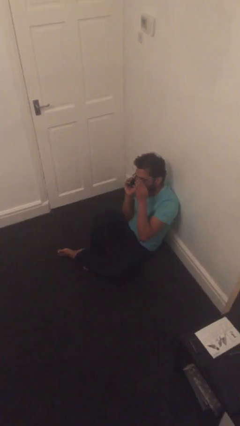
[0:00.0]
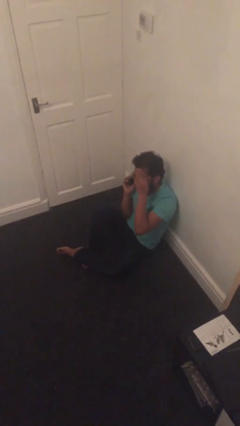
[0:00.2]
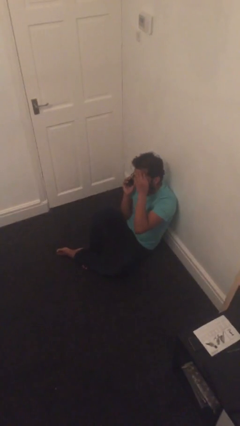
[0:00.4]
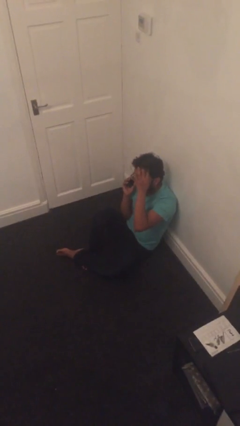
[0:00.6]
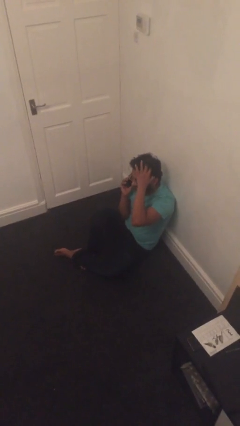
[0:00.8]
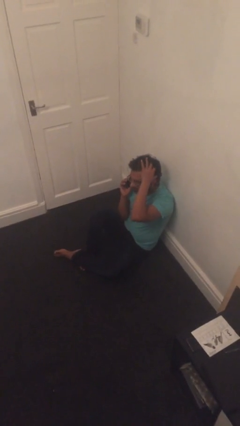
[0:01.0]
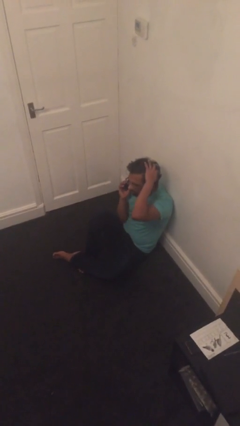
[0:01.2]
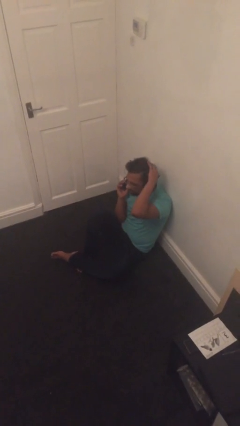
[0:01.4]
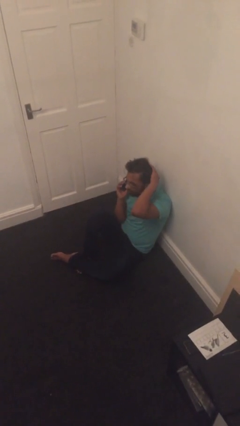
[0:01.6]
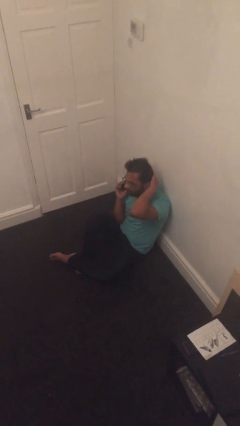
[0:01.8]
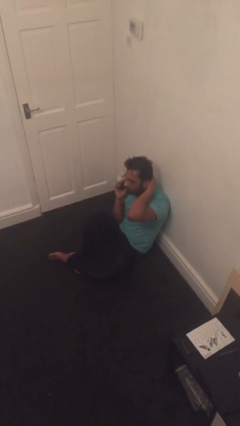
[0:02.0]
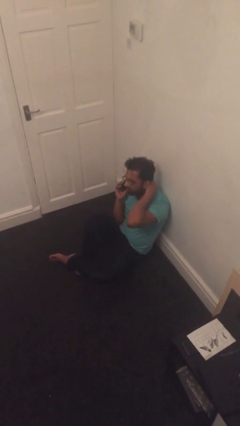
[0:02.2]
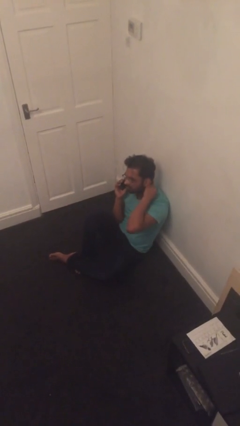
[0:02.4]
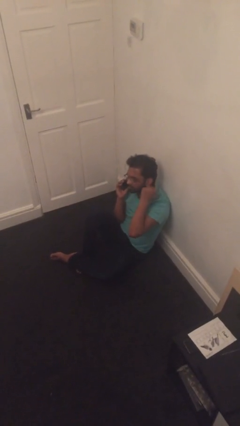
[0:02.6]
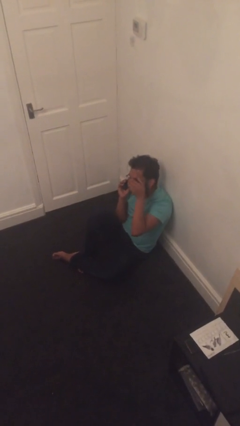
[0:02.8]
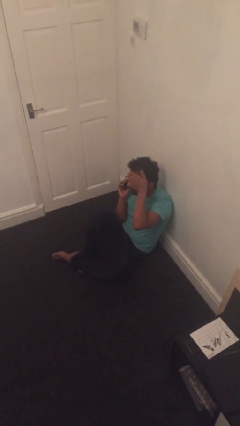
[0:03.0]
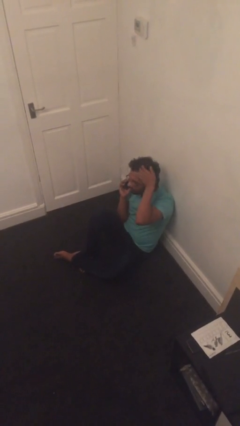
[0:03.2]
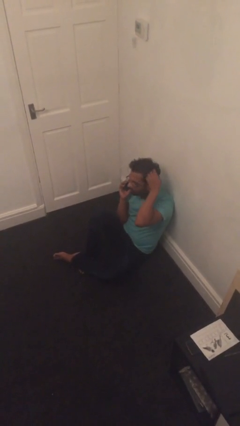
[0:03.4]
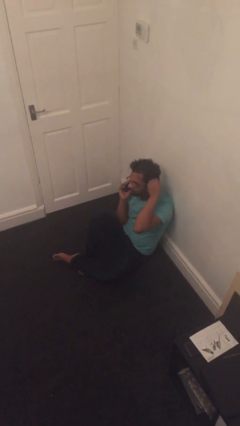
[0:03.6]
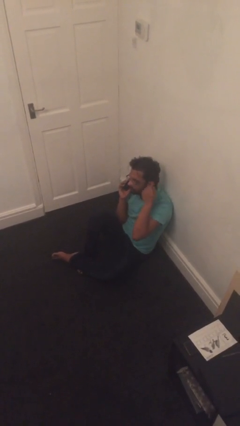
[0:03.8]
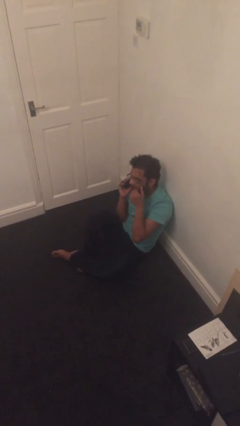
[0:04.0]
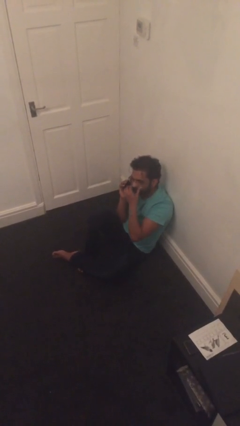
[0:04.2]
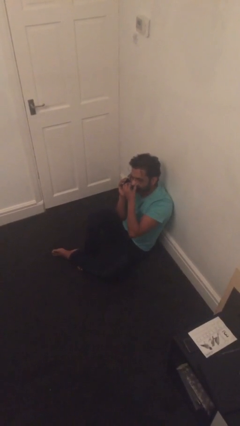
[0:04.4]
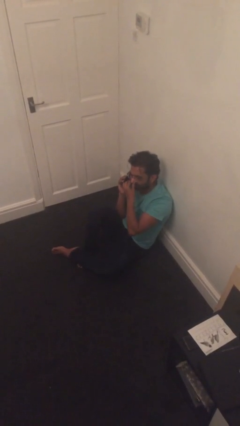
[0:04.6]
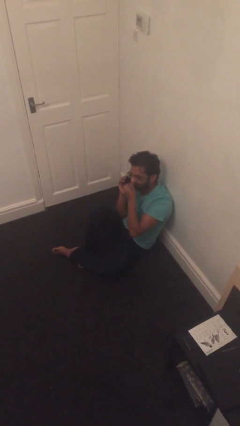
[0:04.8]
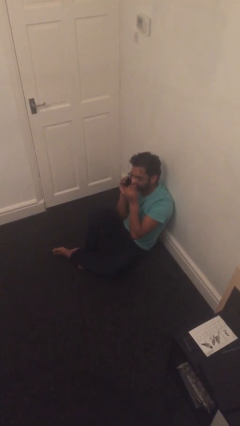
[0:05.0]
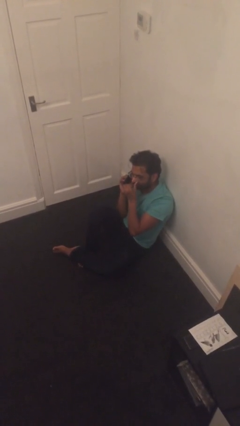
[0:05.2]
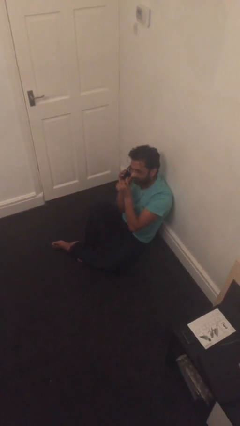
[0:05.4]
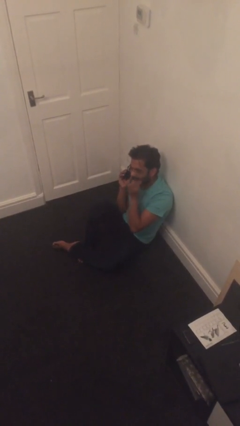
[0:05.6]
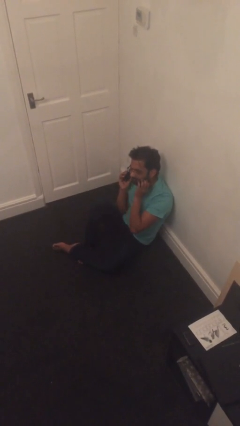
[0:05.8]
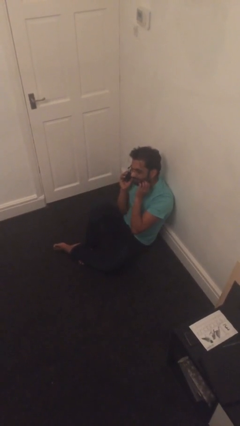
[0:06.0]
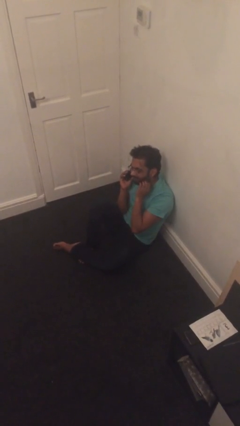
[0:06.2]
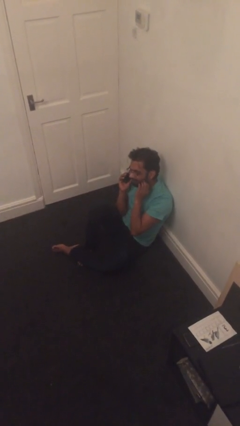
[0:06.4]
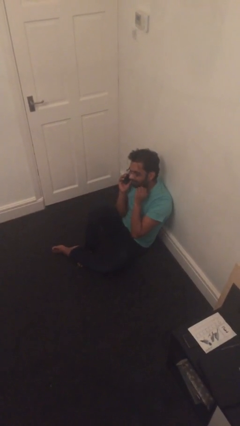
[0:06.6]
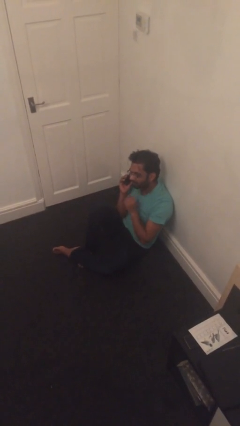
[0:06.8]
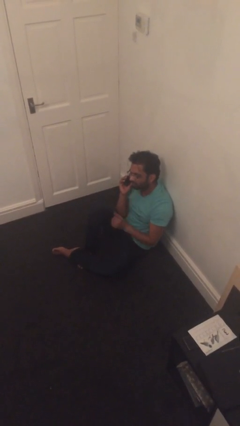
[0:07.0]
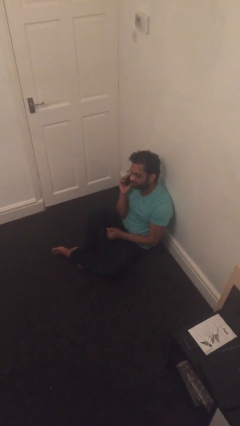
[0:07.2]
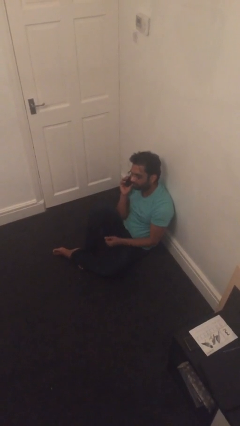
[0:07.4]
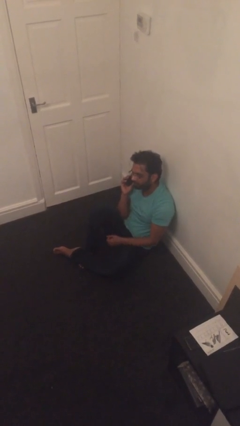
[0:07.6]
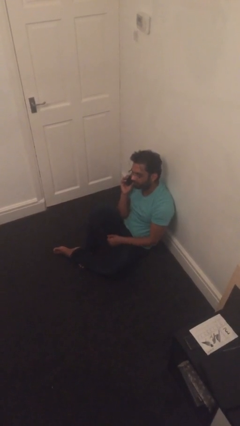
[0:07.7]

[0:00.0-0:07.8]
person talks on phone

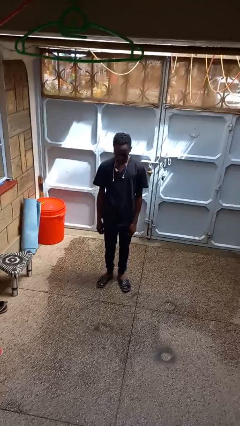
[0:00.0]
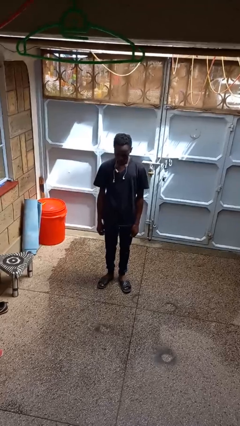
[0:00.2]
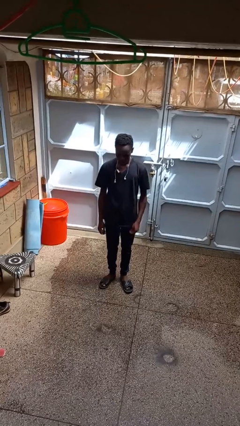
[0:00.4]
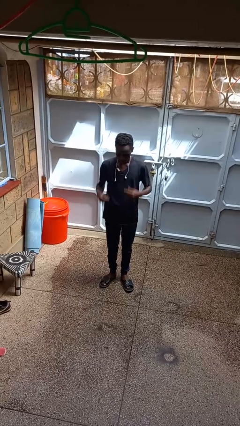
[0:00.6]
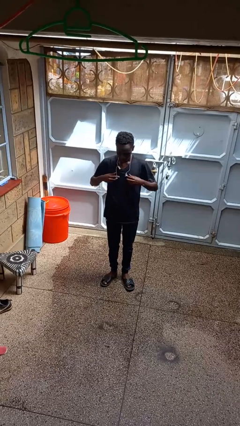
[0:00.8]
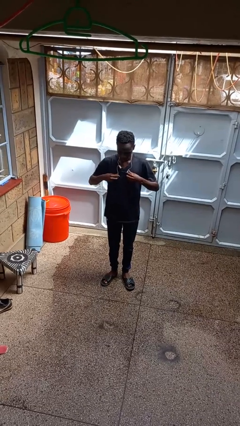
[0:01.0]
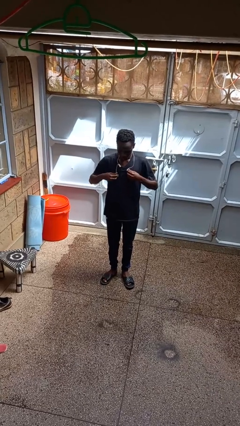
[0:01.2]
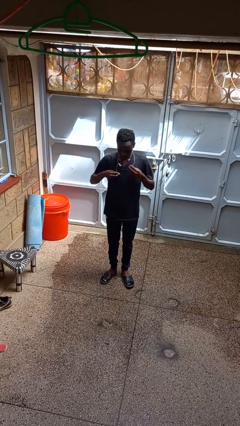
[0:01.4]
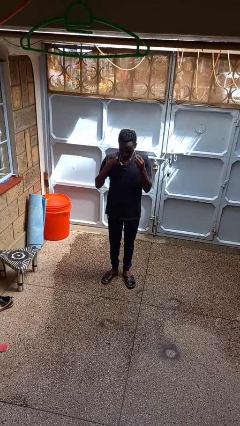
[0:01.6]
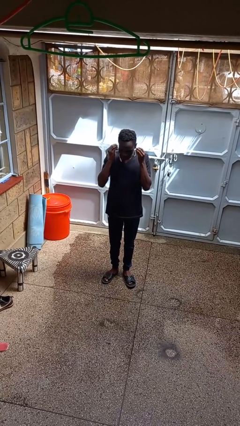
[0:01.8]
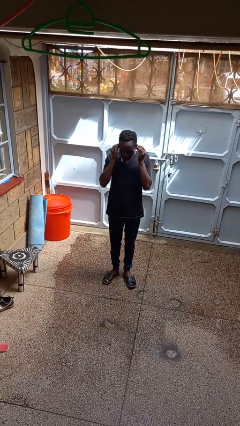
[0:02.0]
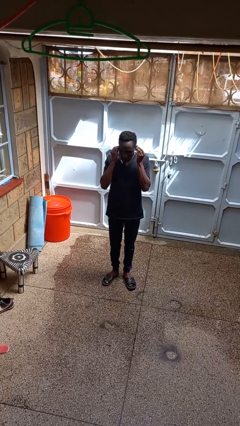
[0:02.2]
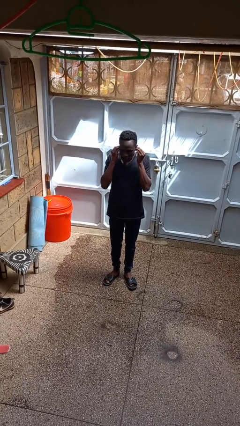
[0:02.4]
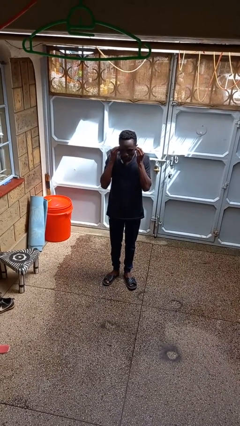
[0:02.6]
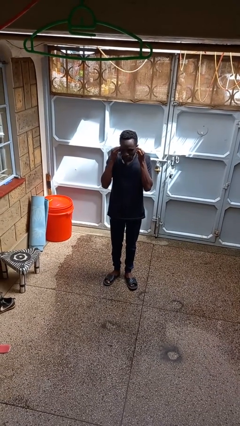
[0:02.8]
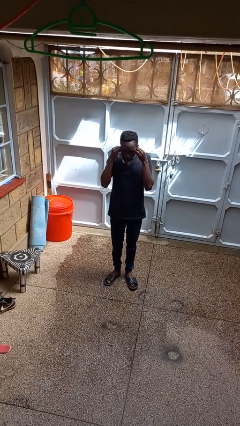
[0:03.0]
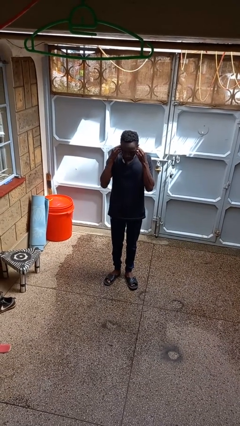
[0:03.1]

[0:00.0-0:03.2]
person puts on headphones

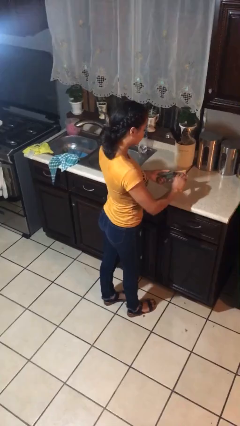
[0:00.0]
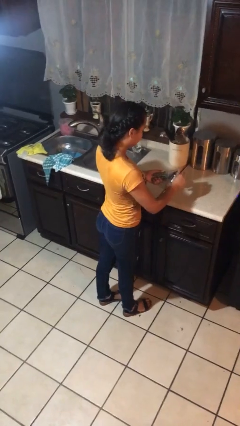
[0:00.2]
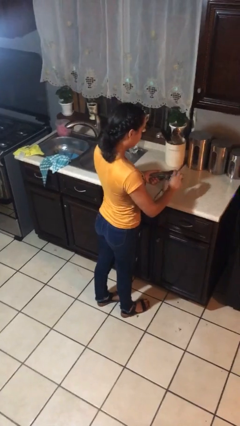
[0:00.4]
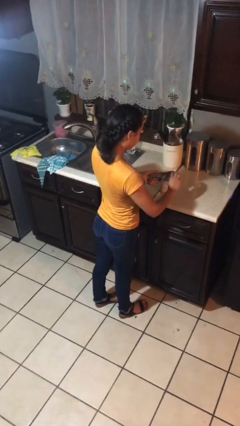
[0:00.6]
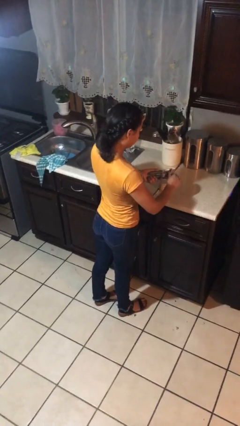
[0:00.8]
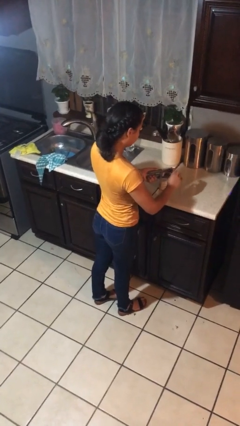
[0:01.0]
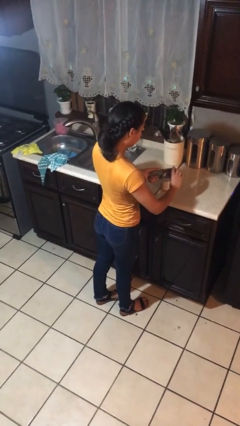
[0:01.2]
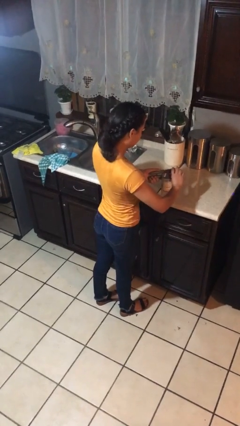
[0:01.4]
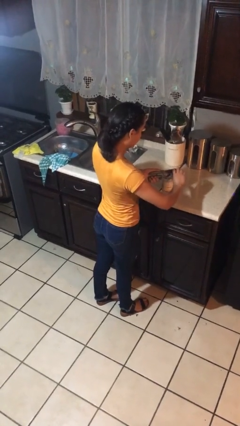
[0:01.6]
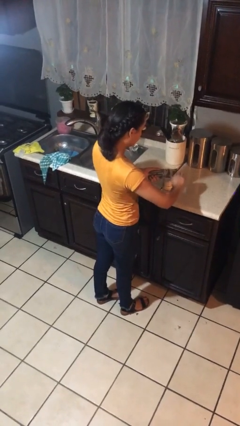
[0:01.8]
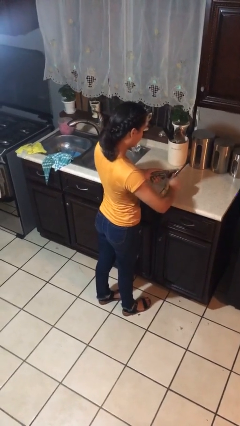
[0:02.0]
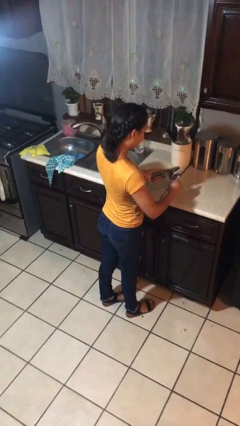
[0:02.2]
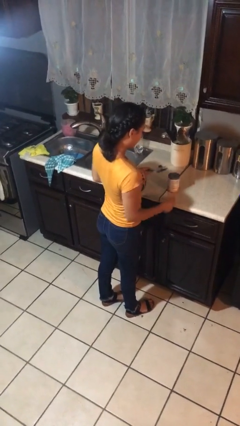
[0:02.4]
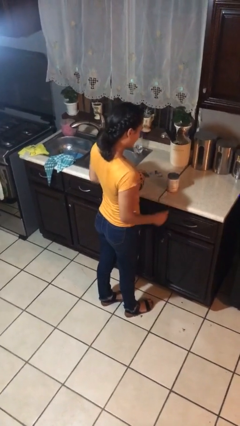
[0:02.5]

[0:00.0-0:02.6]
person opens can with can opener

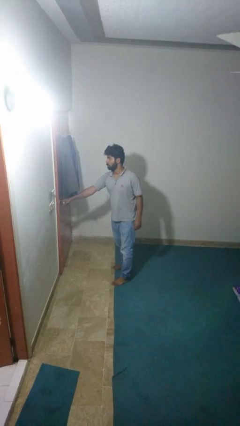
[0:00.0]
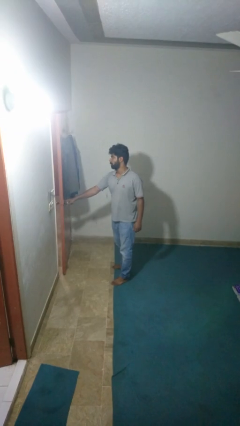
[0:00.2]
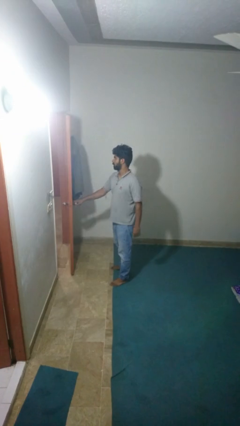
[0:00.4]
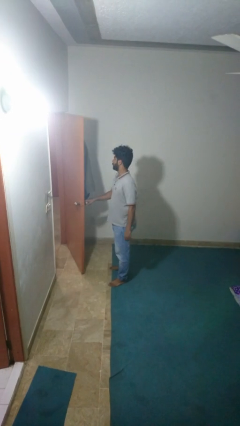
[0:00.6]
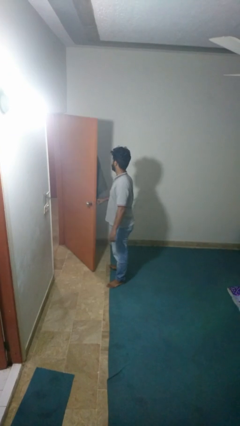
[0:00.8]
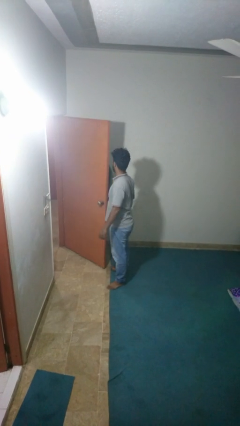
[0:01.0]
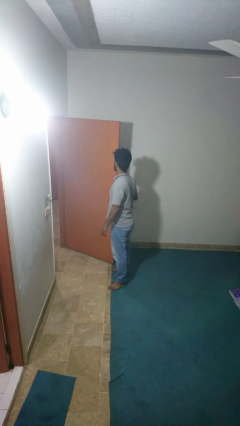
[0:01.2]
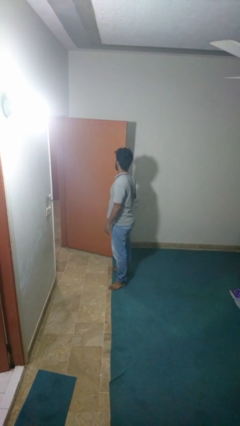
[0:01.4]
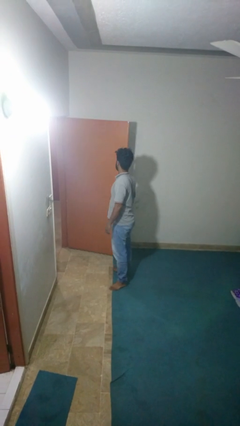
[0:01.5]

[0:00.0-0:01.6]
person opens facility door

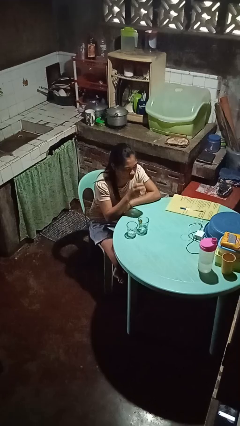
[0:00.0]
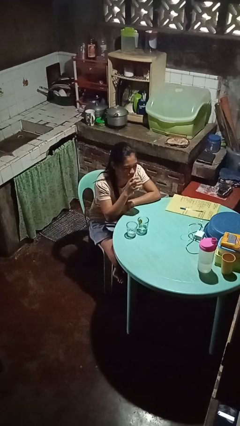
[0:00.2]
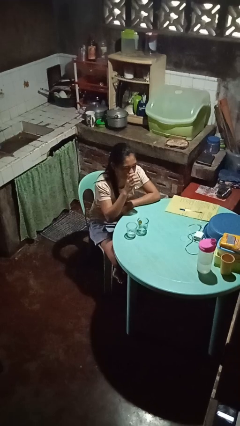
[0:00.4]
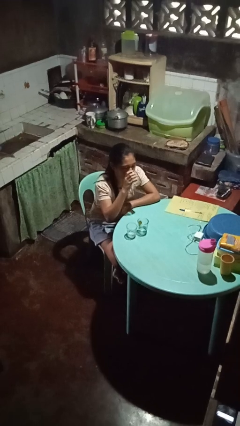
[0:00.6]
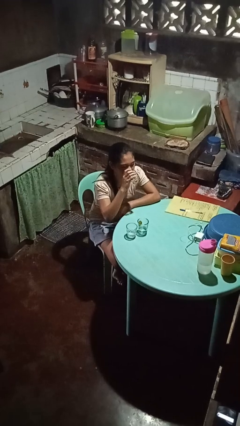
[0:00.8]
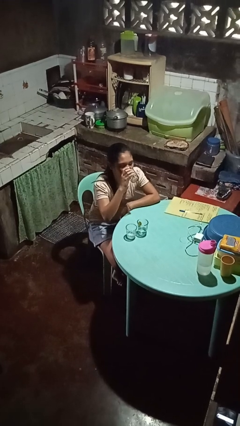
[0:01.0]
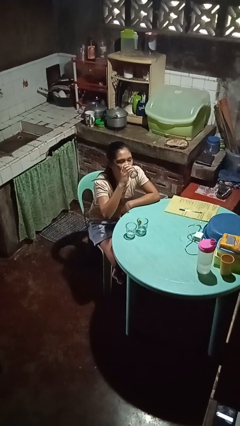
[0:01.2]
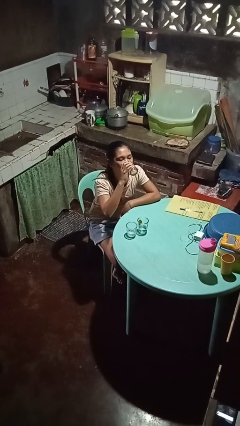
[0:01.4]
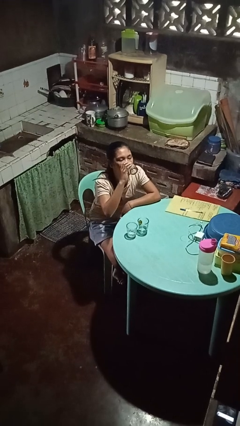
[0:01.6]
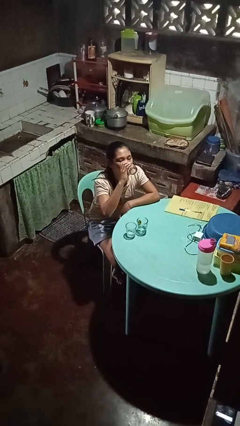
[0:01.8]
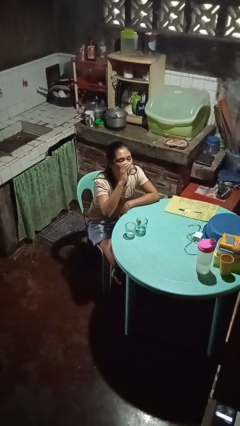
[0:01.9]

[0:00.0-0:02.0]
person drinks from shotglass

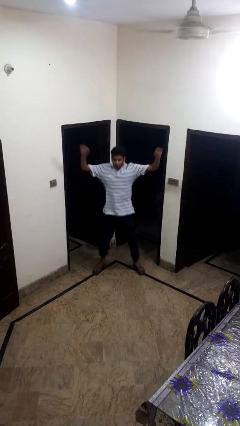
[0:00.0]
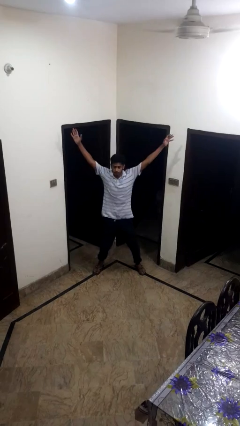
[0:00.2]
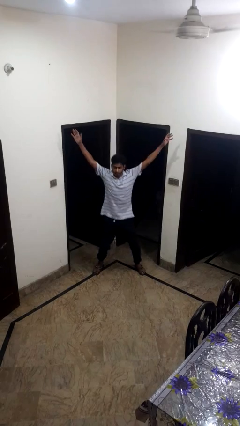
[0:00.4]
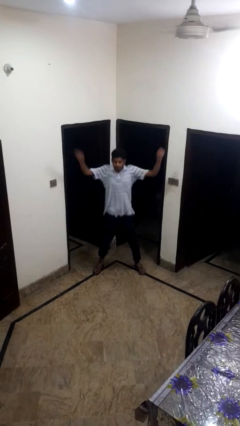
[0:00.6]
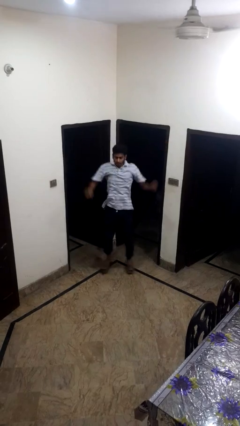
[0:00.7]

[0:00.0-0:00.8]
person exercises with jumping jacks
